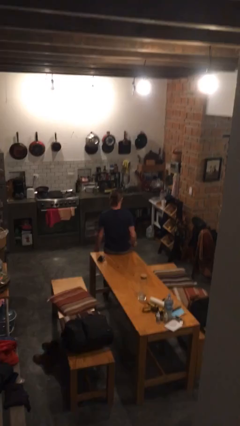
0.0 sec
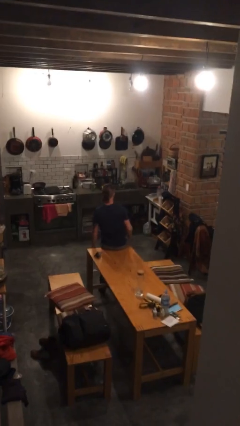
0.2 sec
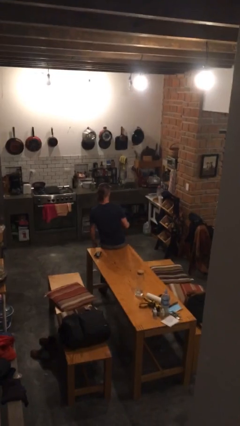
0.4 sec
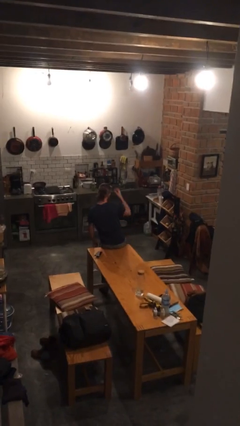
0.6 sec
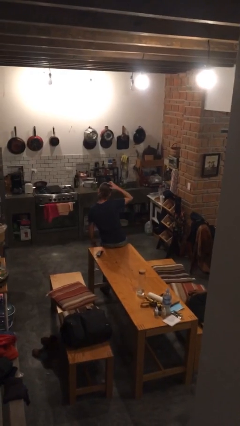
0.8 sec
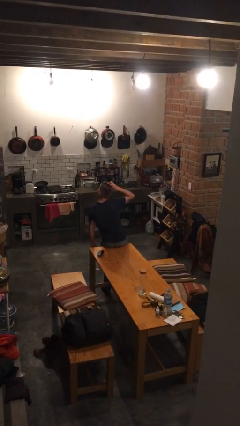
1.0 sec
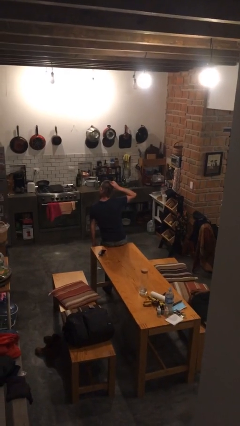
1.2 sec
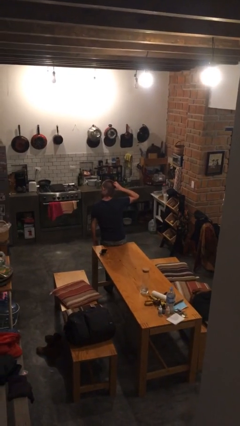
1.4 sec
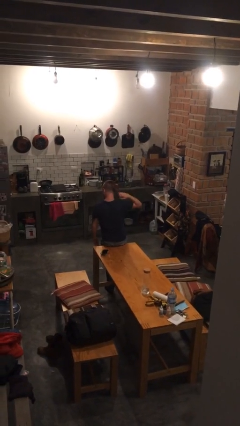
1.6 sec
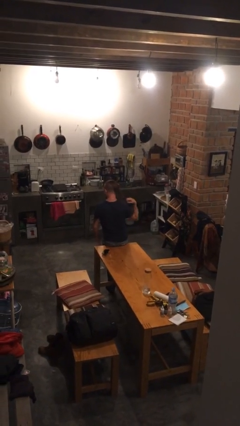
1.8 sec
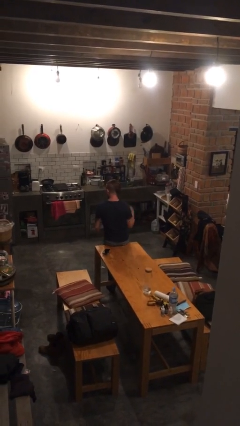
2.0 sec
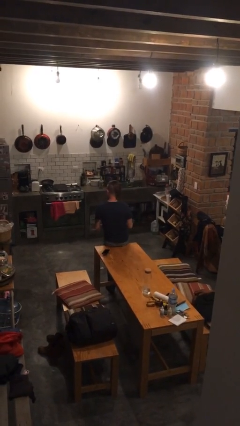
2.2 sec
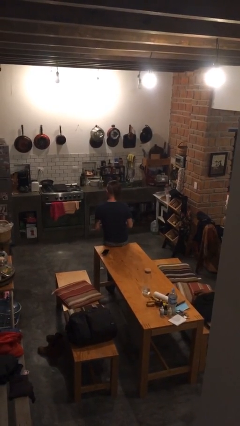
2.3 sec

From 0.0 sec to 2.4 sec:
person takes off hairtie

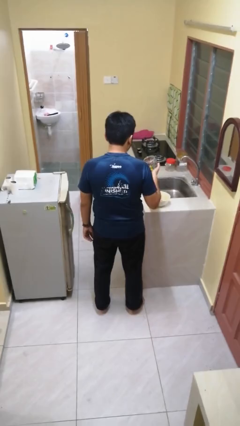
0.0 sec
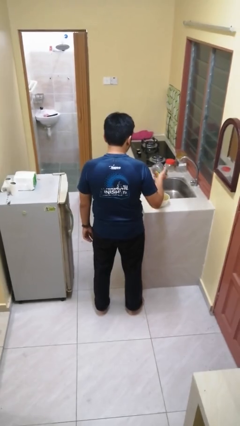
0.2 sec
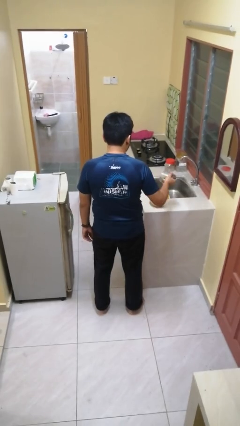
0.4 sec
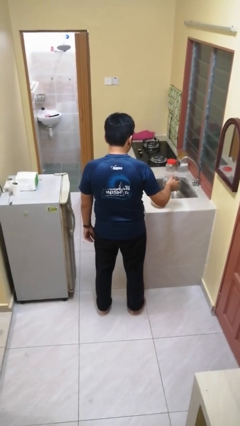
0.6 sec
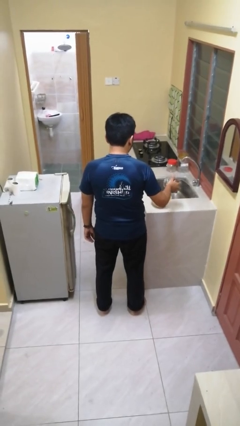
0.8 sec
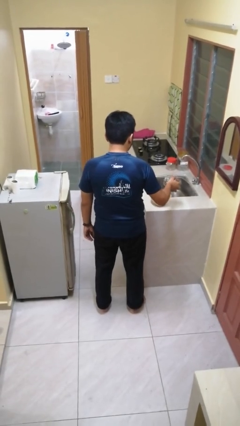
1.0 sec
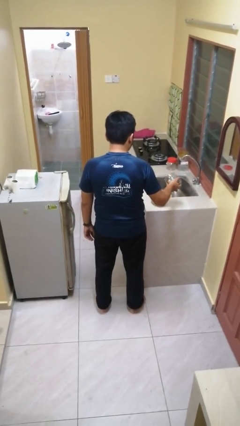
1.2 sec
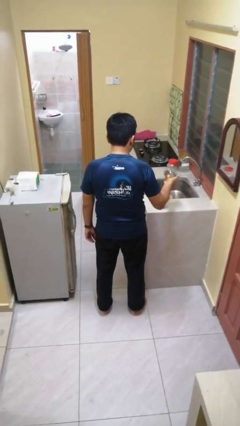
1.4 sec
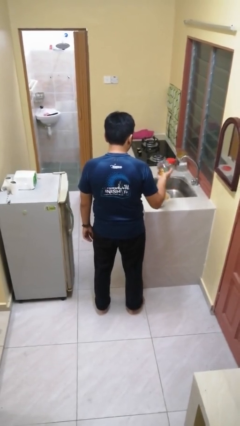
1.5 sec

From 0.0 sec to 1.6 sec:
person pours into bowl

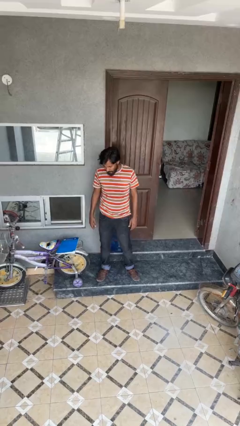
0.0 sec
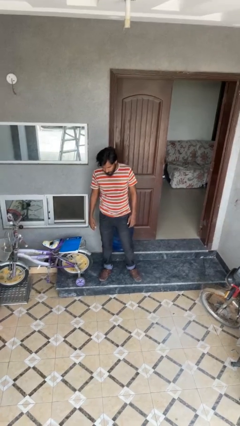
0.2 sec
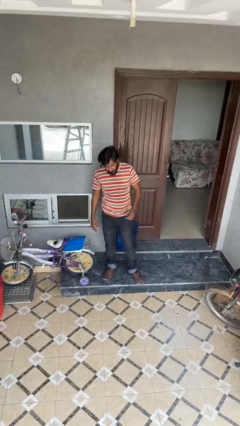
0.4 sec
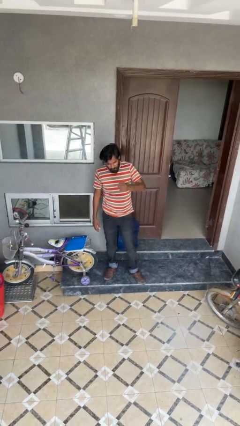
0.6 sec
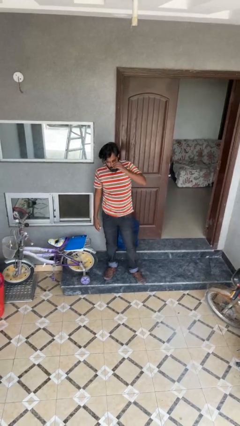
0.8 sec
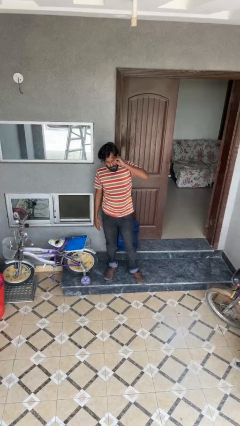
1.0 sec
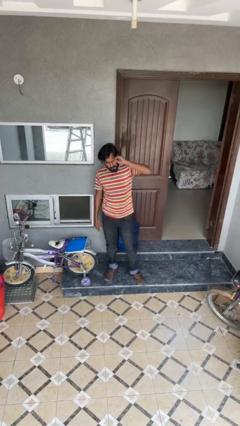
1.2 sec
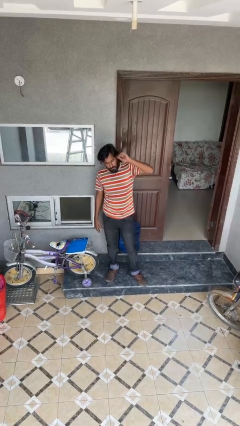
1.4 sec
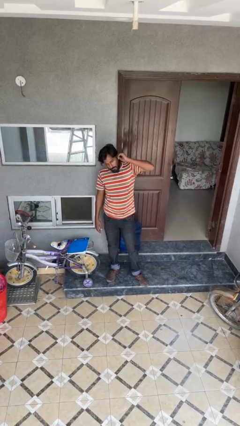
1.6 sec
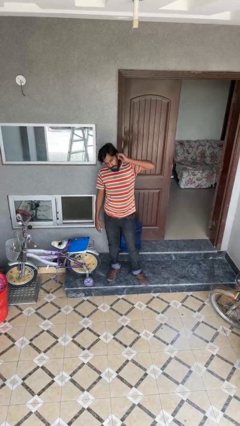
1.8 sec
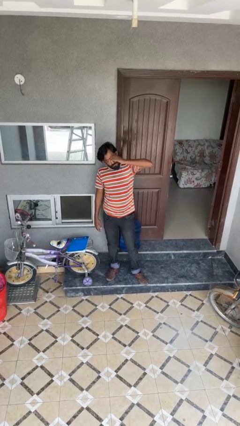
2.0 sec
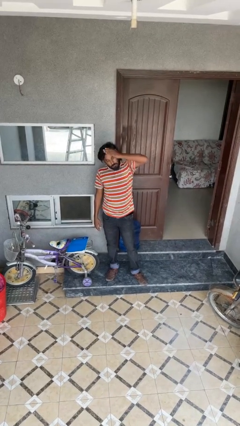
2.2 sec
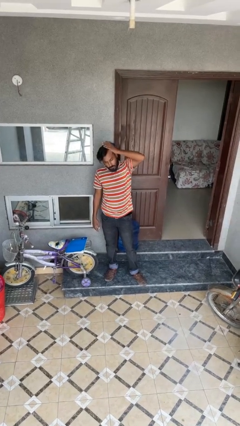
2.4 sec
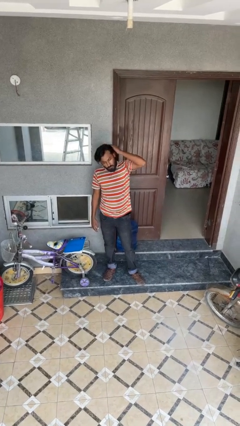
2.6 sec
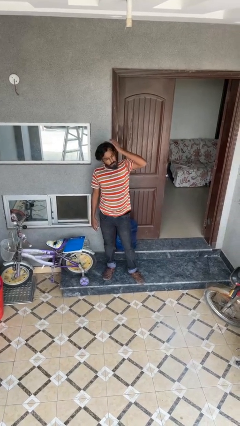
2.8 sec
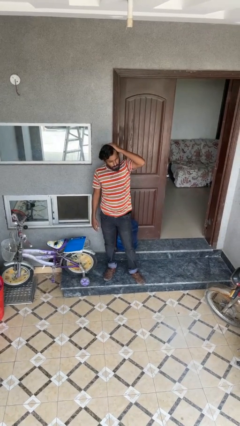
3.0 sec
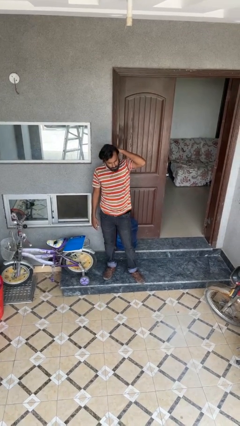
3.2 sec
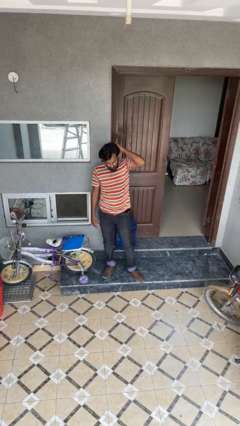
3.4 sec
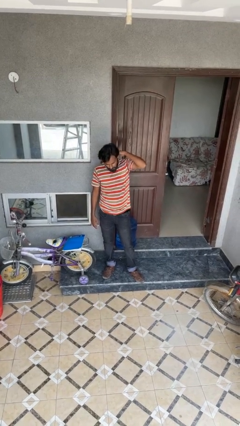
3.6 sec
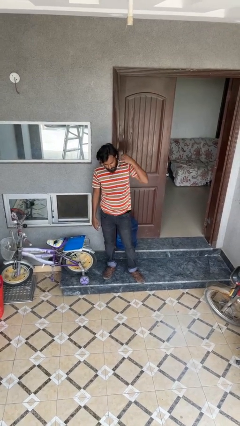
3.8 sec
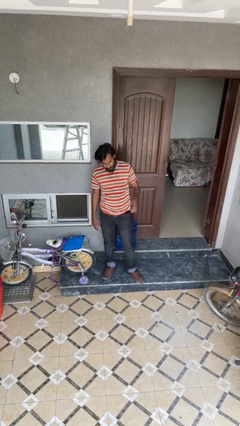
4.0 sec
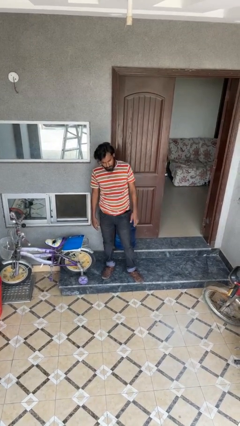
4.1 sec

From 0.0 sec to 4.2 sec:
person scratches face

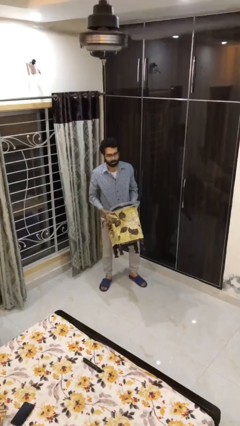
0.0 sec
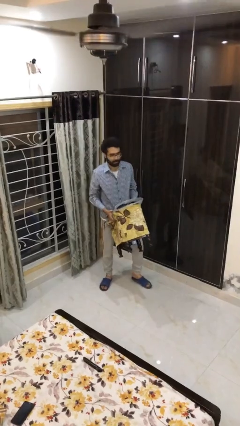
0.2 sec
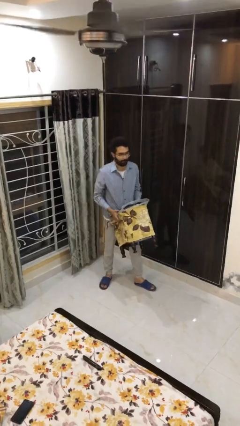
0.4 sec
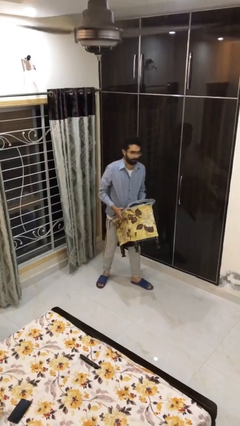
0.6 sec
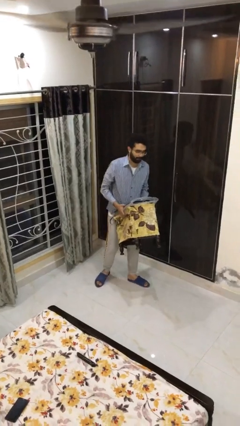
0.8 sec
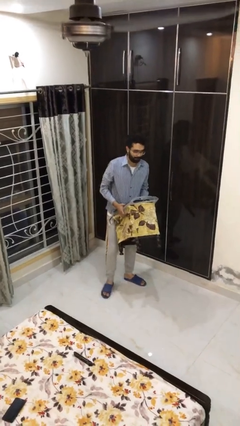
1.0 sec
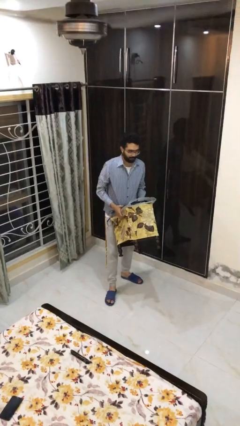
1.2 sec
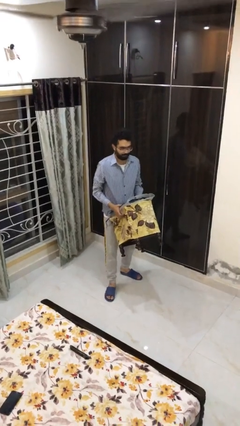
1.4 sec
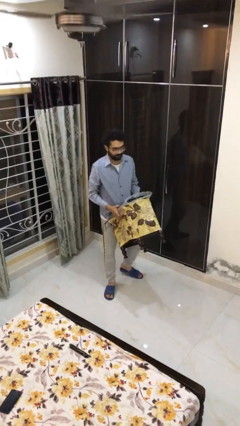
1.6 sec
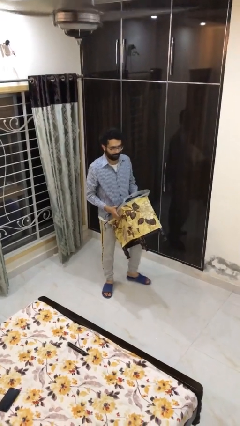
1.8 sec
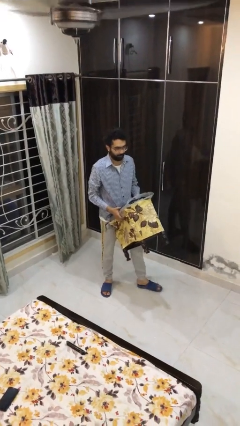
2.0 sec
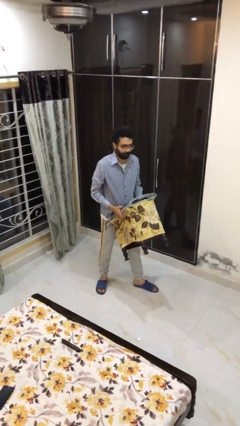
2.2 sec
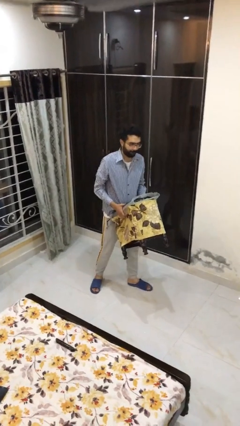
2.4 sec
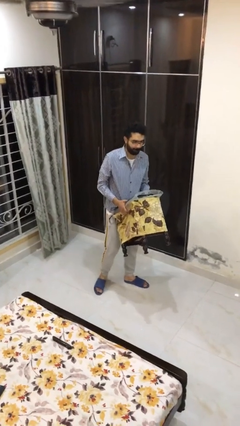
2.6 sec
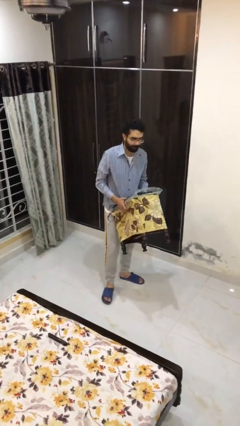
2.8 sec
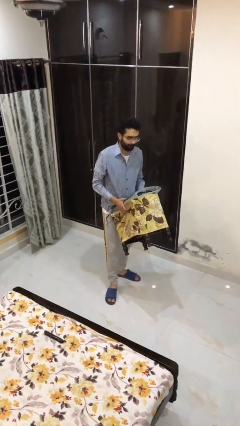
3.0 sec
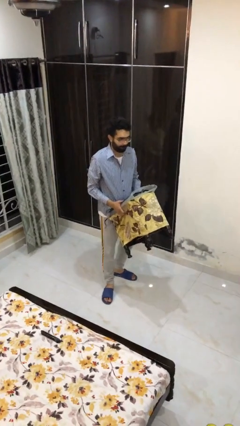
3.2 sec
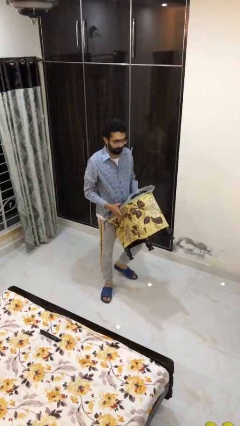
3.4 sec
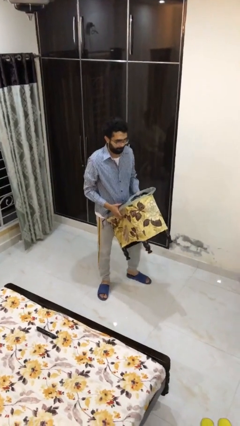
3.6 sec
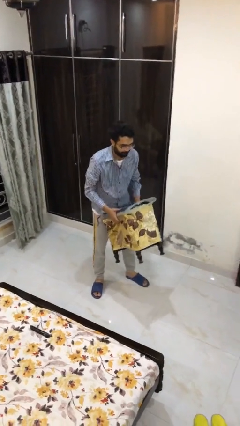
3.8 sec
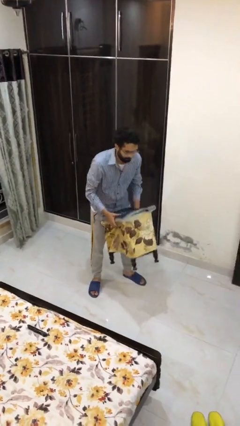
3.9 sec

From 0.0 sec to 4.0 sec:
person carries heavy object

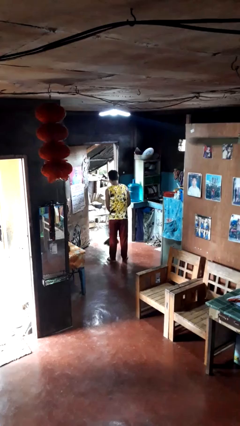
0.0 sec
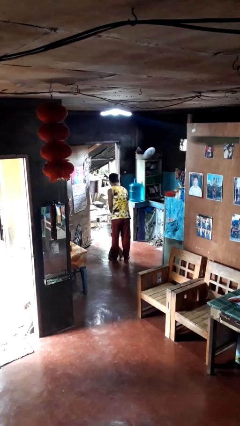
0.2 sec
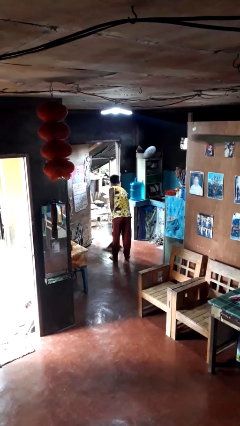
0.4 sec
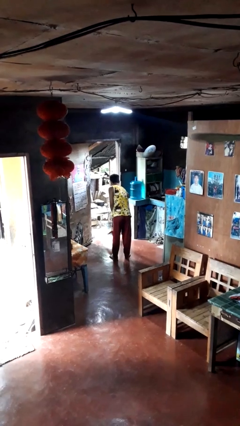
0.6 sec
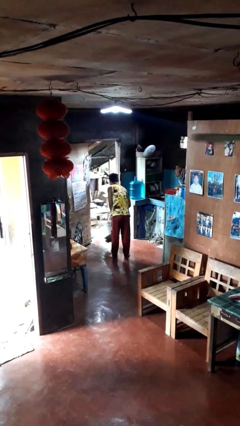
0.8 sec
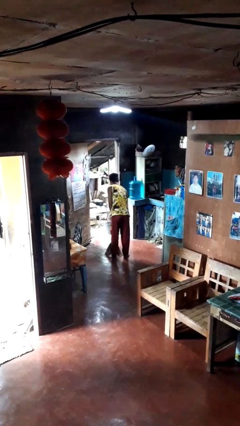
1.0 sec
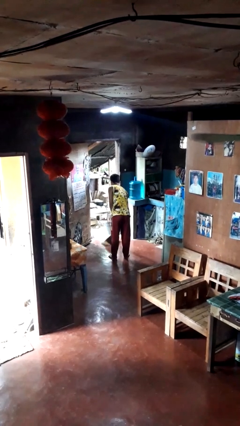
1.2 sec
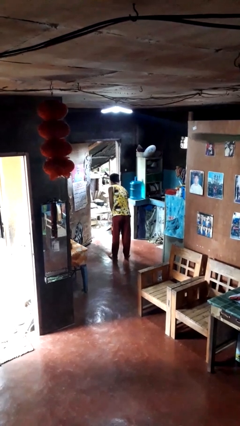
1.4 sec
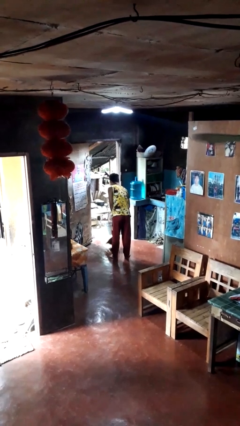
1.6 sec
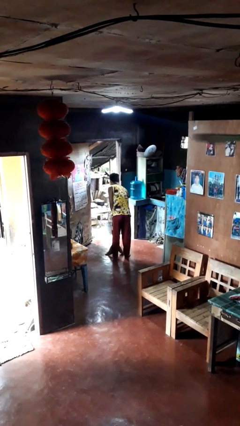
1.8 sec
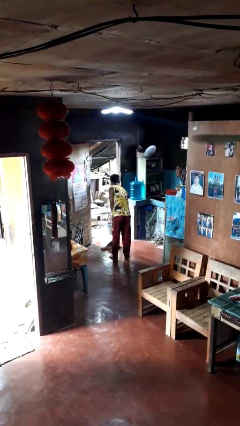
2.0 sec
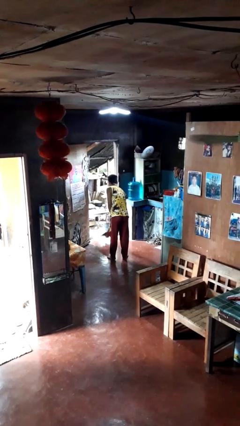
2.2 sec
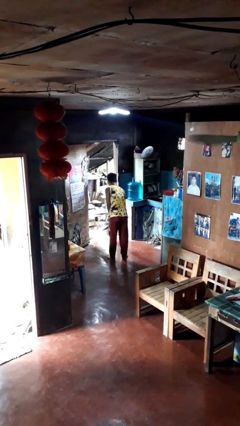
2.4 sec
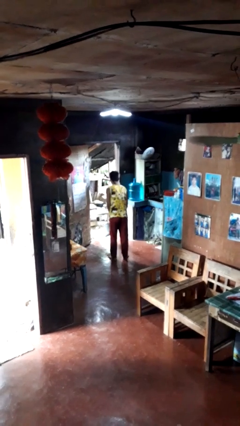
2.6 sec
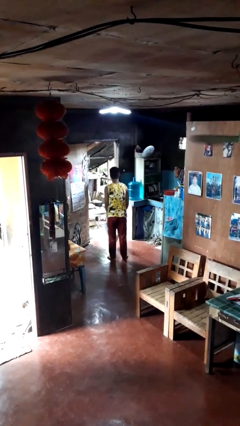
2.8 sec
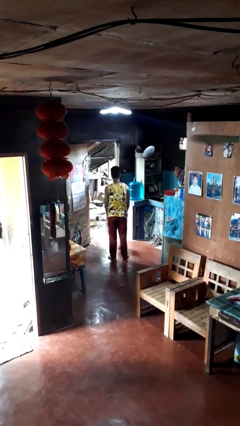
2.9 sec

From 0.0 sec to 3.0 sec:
person sweeps floor

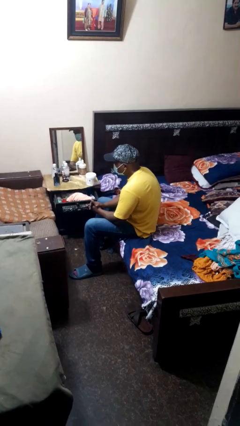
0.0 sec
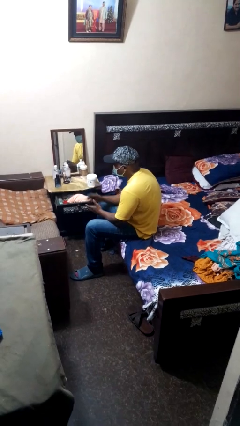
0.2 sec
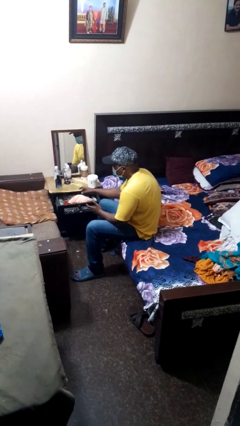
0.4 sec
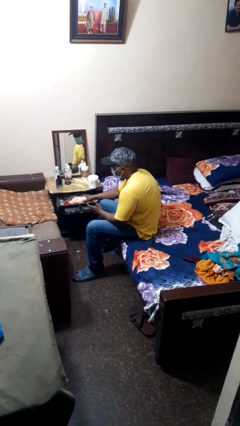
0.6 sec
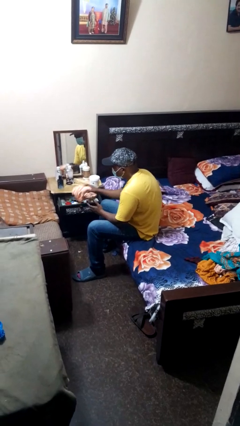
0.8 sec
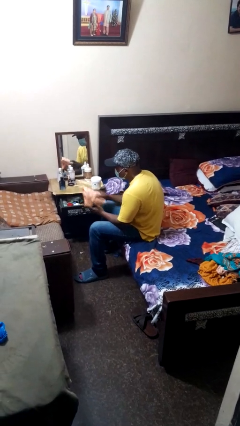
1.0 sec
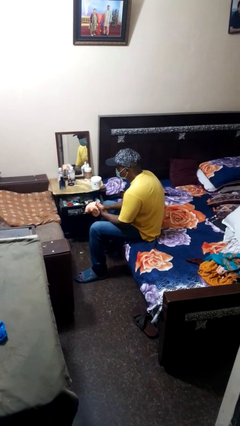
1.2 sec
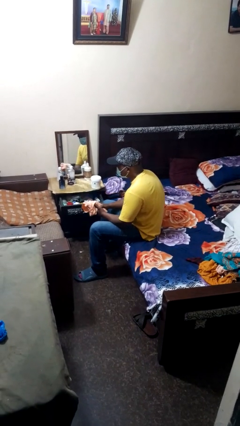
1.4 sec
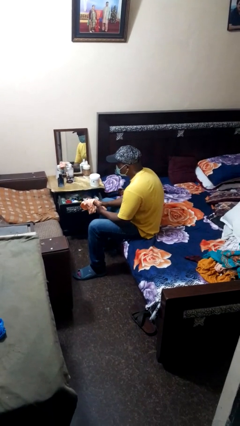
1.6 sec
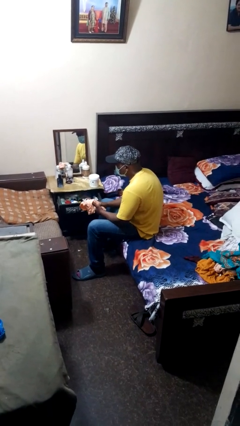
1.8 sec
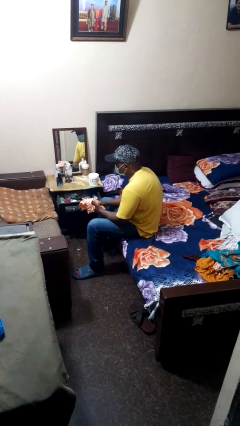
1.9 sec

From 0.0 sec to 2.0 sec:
person takes clothes from dresser
